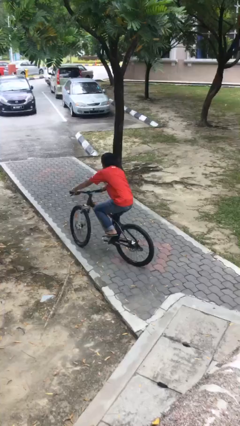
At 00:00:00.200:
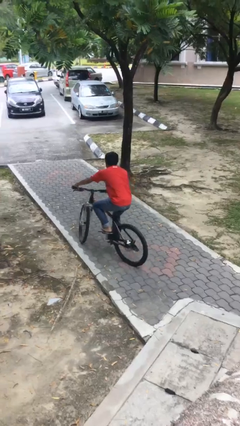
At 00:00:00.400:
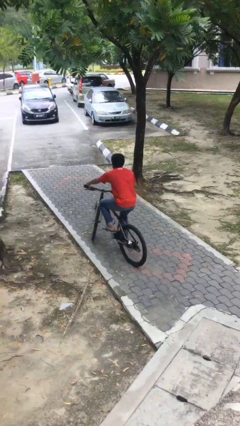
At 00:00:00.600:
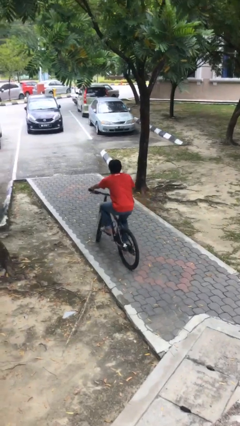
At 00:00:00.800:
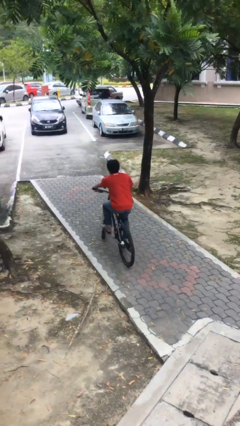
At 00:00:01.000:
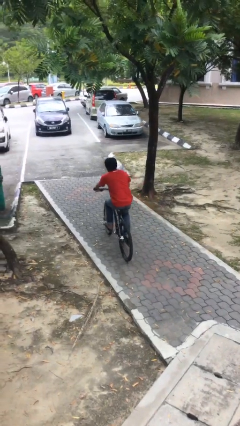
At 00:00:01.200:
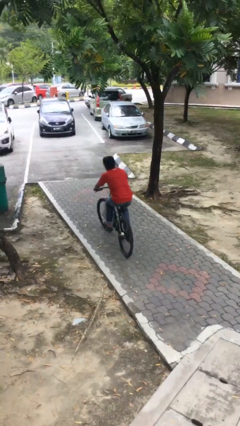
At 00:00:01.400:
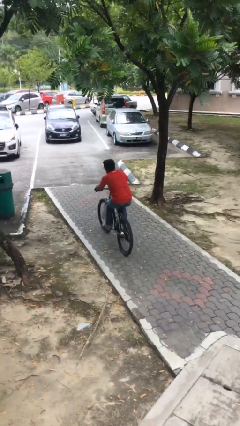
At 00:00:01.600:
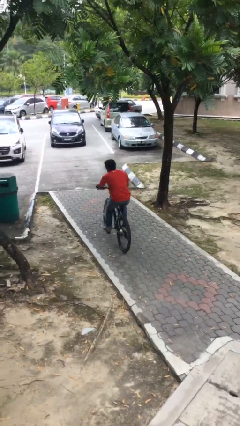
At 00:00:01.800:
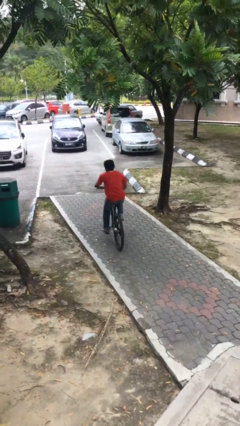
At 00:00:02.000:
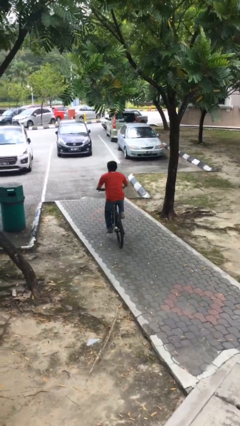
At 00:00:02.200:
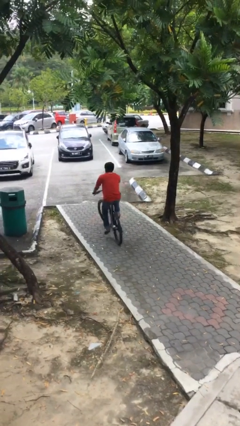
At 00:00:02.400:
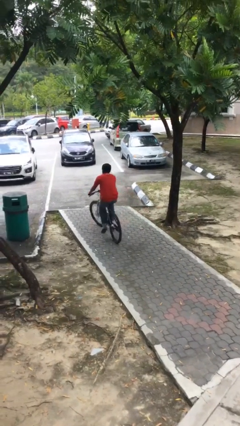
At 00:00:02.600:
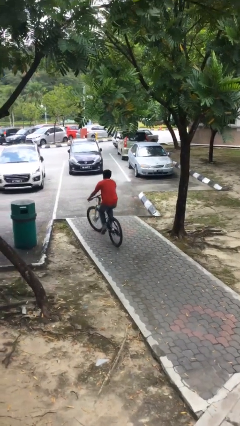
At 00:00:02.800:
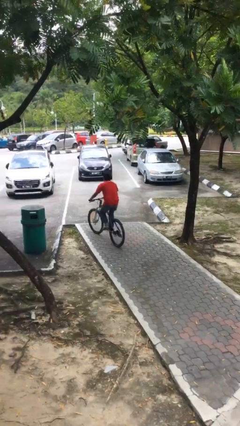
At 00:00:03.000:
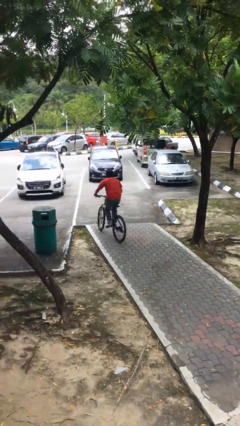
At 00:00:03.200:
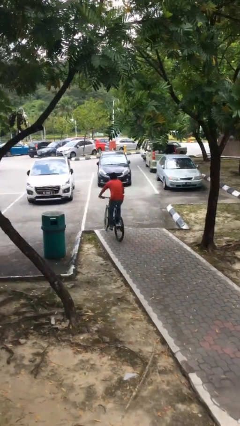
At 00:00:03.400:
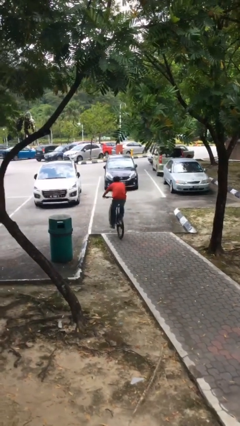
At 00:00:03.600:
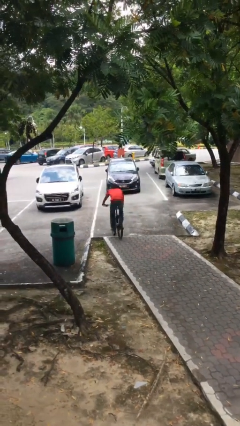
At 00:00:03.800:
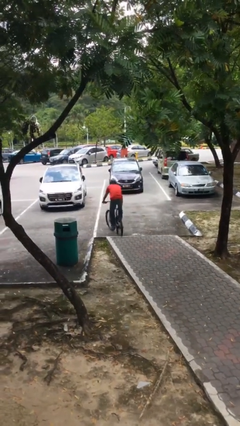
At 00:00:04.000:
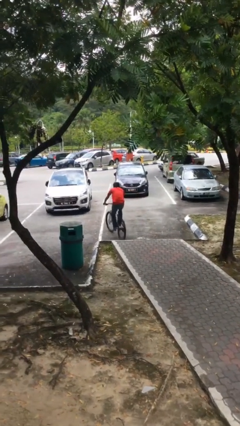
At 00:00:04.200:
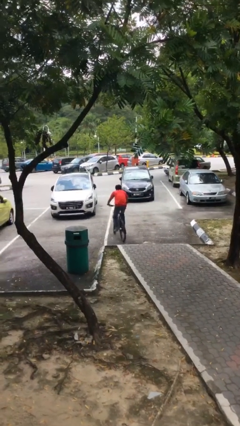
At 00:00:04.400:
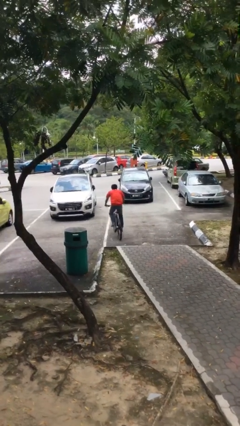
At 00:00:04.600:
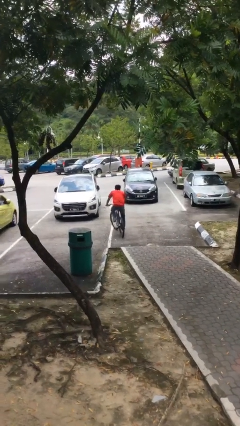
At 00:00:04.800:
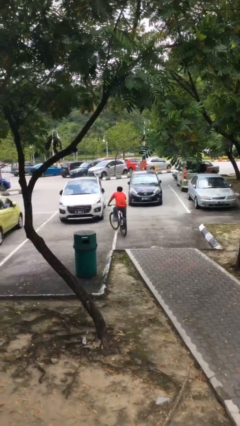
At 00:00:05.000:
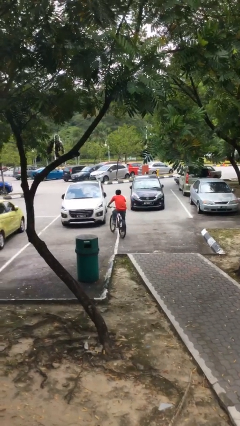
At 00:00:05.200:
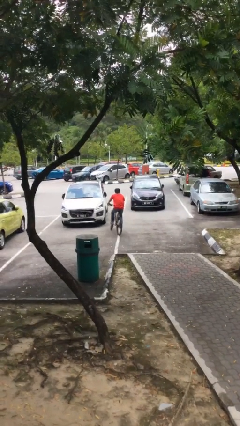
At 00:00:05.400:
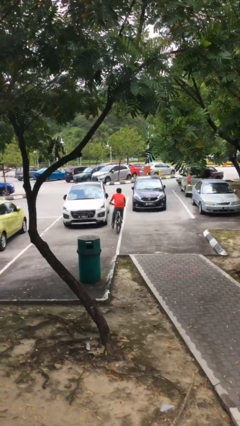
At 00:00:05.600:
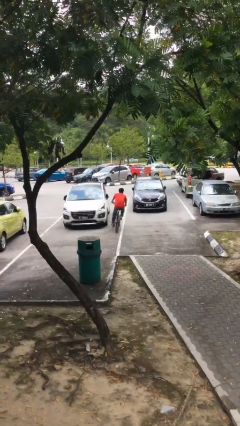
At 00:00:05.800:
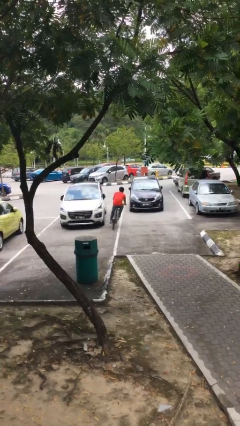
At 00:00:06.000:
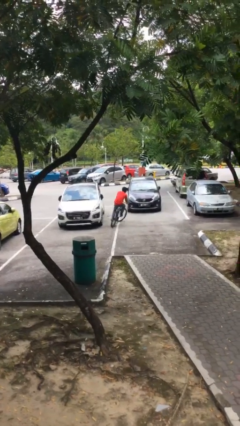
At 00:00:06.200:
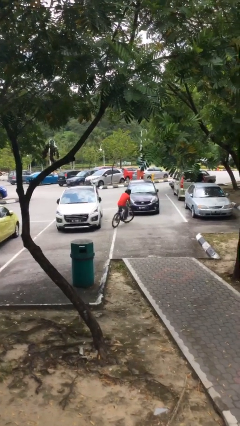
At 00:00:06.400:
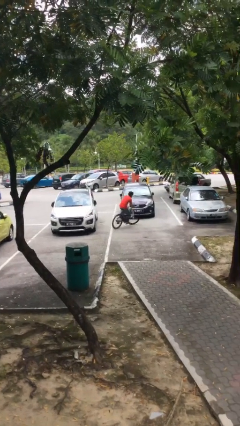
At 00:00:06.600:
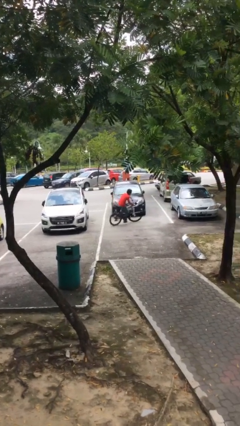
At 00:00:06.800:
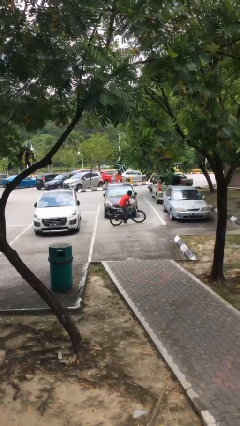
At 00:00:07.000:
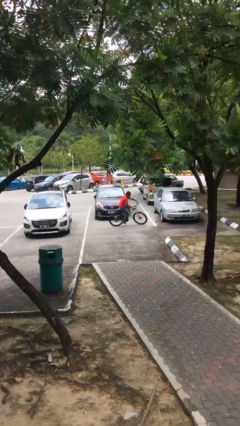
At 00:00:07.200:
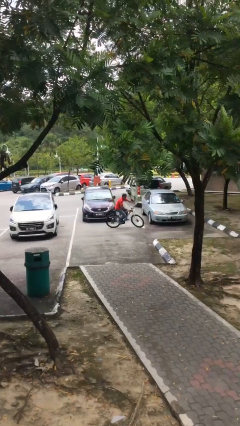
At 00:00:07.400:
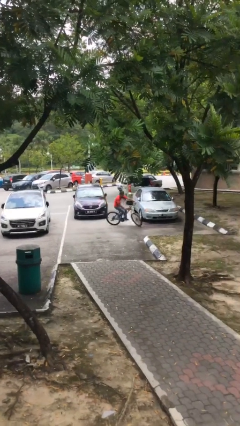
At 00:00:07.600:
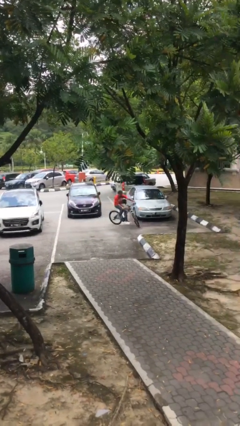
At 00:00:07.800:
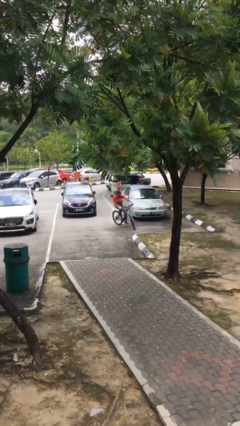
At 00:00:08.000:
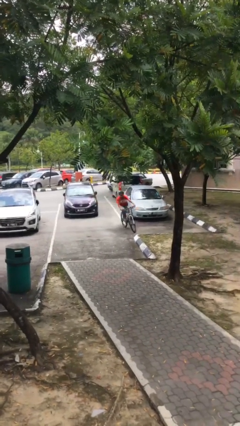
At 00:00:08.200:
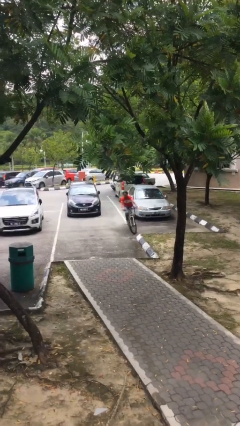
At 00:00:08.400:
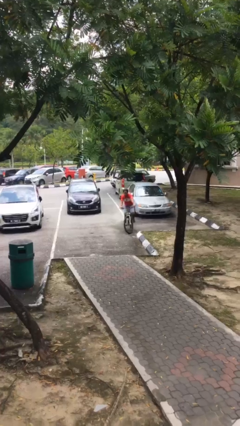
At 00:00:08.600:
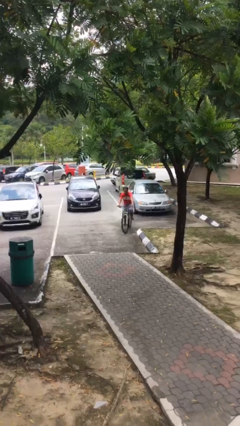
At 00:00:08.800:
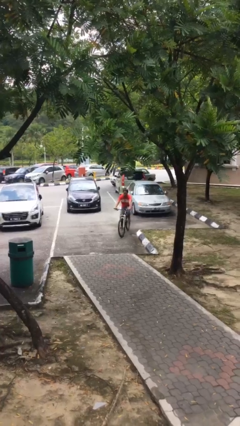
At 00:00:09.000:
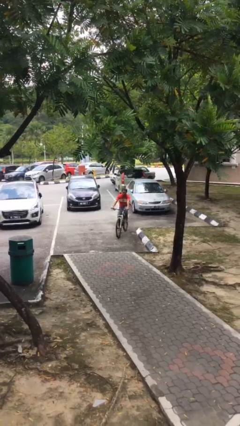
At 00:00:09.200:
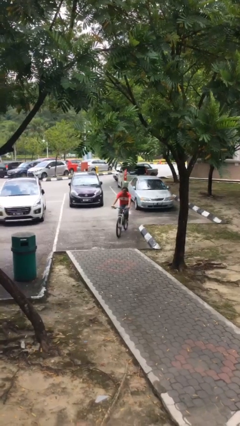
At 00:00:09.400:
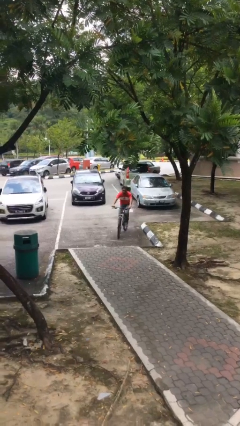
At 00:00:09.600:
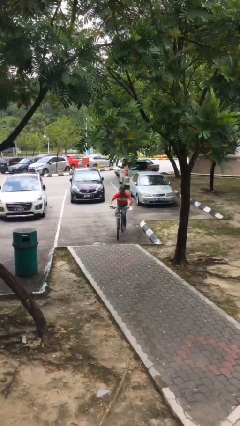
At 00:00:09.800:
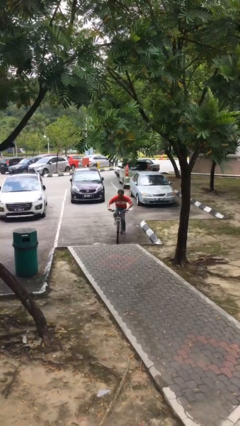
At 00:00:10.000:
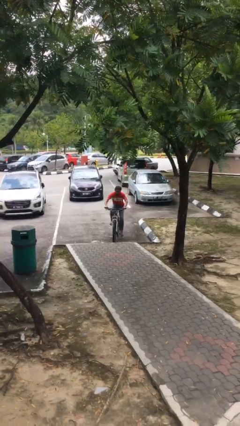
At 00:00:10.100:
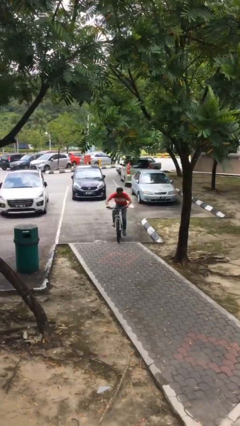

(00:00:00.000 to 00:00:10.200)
person rides bicycle

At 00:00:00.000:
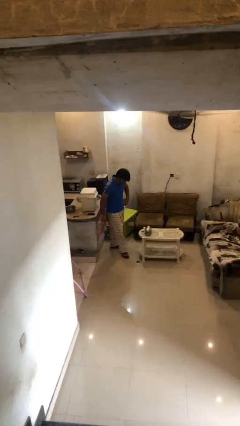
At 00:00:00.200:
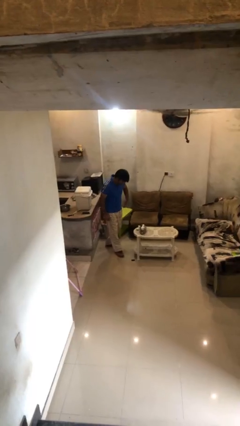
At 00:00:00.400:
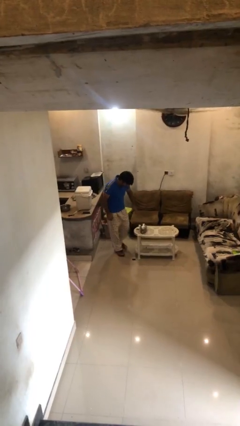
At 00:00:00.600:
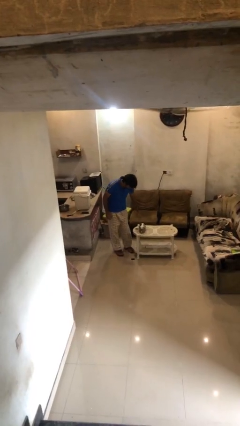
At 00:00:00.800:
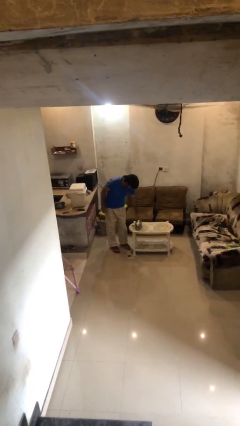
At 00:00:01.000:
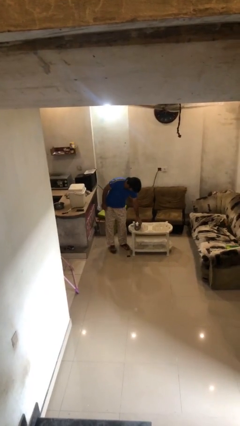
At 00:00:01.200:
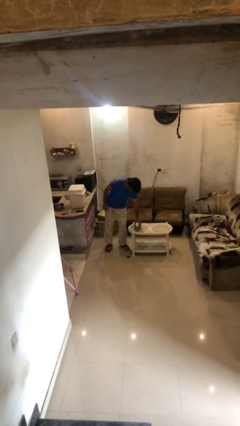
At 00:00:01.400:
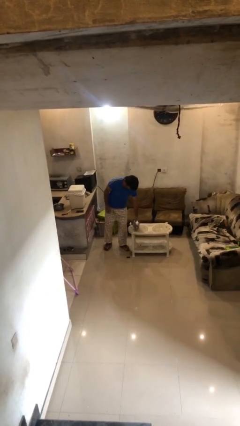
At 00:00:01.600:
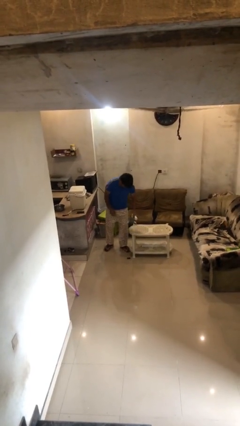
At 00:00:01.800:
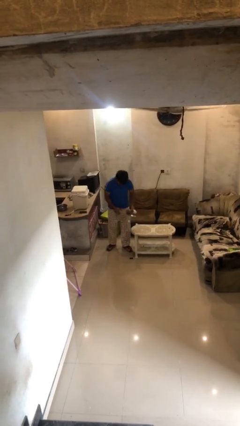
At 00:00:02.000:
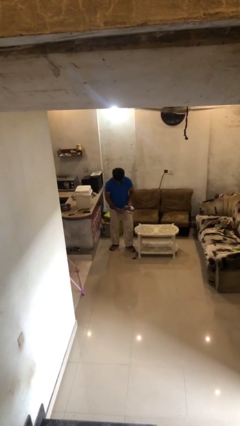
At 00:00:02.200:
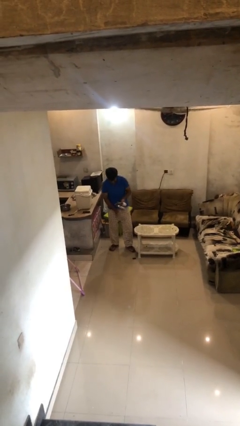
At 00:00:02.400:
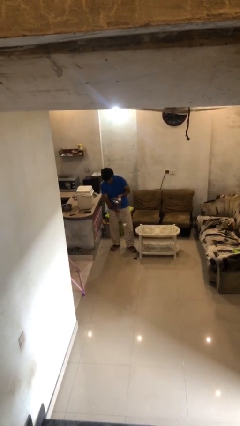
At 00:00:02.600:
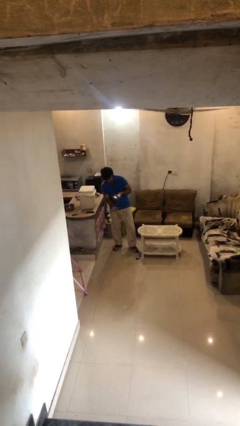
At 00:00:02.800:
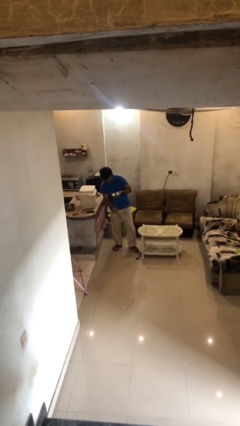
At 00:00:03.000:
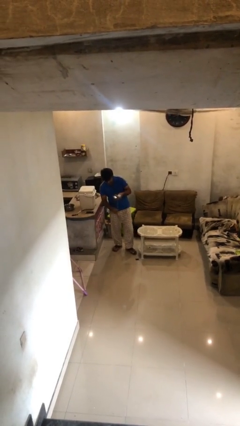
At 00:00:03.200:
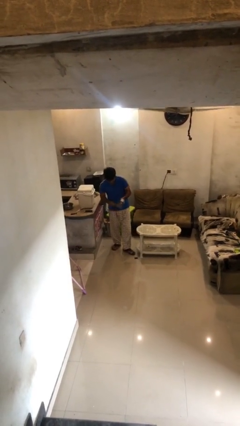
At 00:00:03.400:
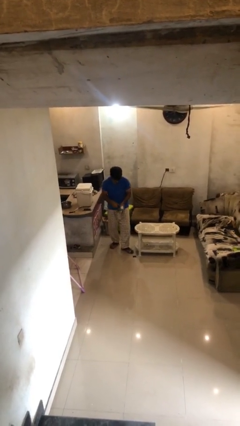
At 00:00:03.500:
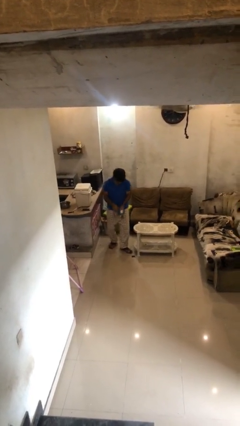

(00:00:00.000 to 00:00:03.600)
person picks up object from table

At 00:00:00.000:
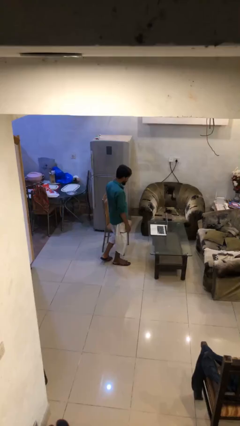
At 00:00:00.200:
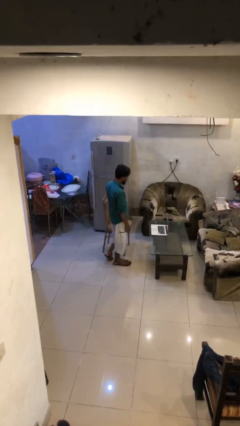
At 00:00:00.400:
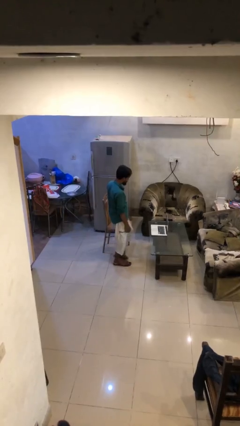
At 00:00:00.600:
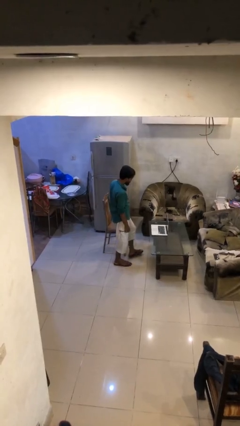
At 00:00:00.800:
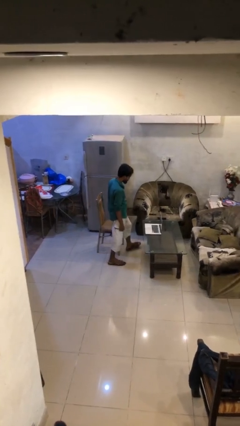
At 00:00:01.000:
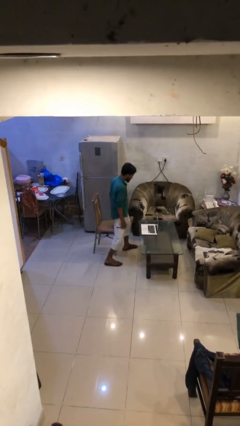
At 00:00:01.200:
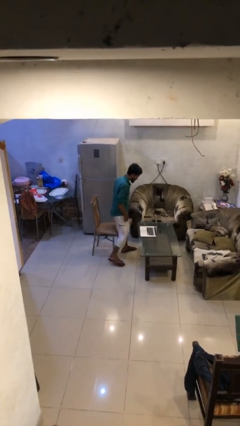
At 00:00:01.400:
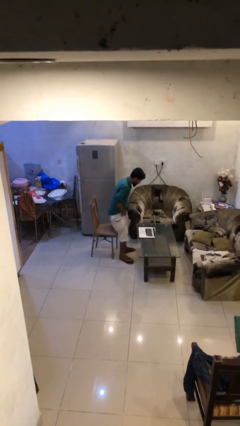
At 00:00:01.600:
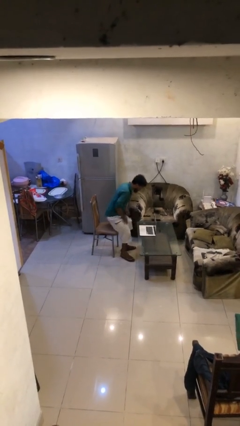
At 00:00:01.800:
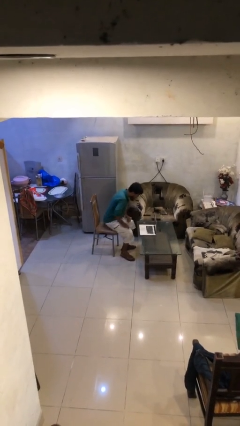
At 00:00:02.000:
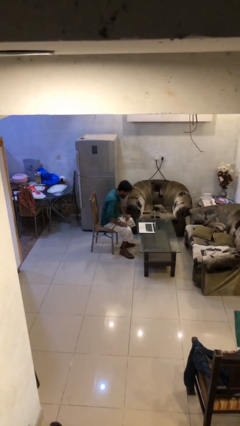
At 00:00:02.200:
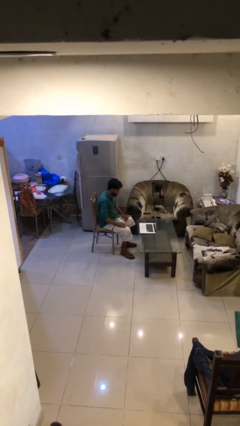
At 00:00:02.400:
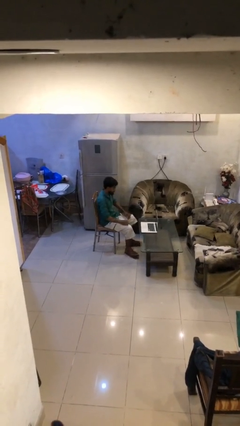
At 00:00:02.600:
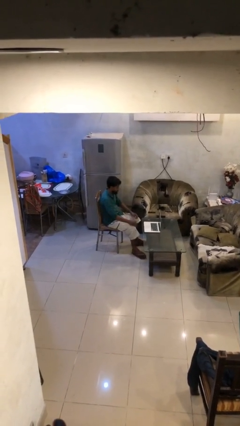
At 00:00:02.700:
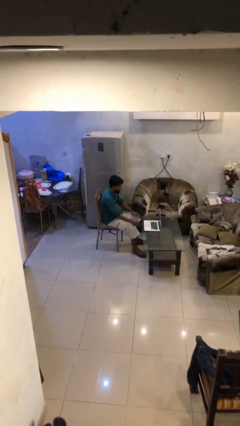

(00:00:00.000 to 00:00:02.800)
person sits down

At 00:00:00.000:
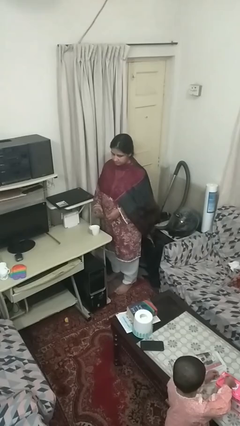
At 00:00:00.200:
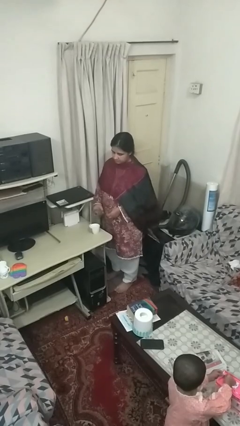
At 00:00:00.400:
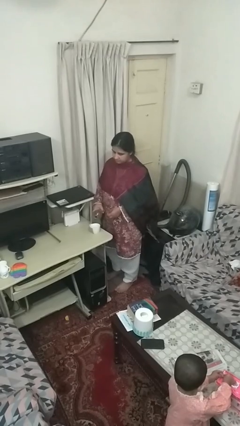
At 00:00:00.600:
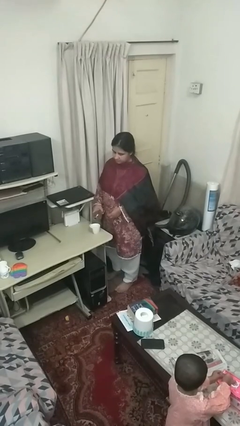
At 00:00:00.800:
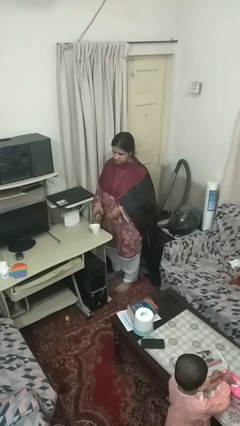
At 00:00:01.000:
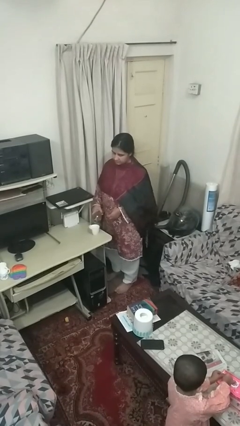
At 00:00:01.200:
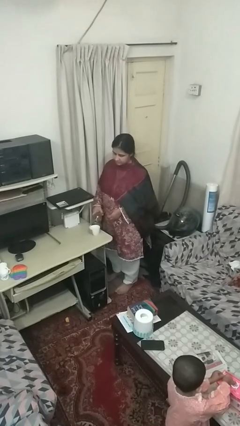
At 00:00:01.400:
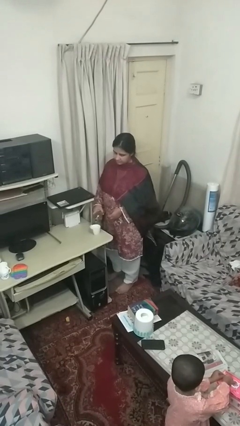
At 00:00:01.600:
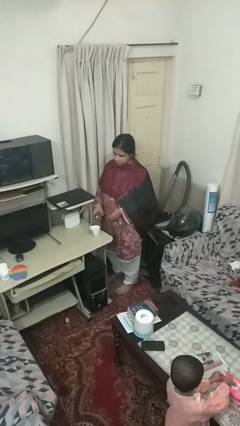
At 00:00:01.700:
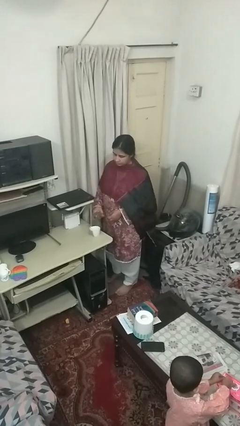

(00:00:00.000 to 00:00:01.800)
person pours liquid into cup
